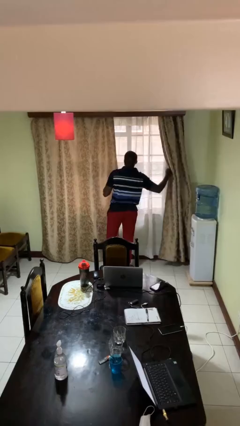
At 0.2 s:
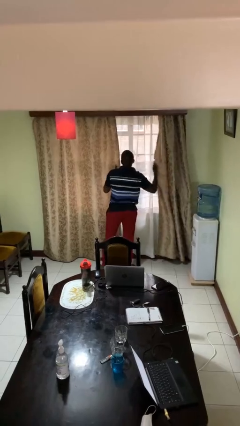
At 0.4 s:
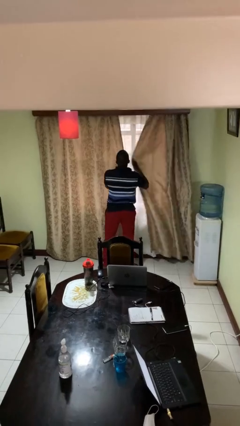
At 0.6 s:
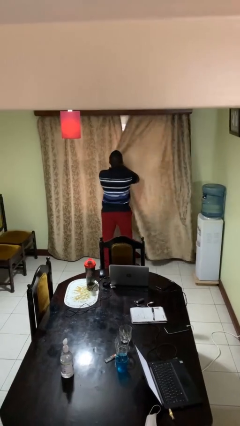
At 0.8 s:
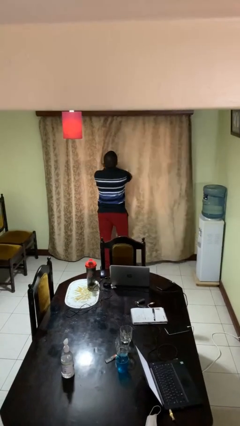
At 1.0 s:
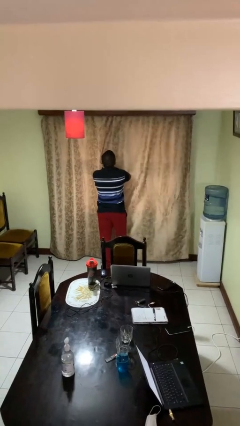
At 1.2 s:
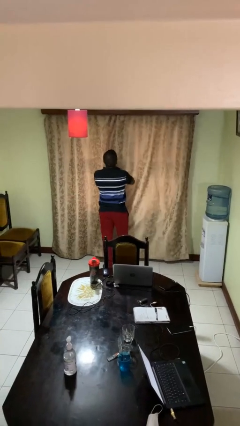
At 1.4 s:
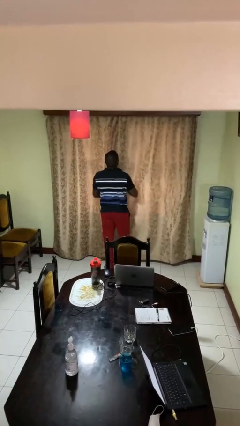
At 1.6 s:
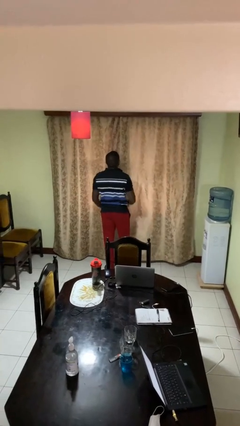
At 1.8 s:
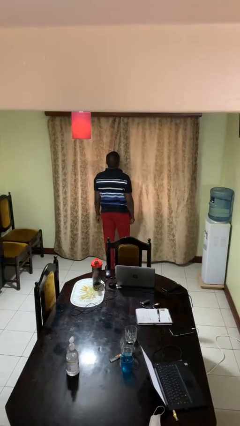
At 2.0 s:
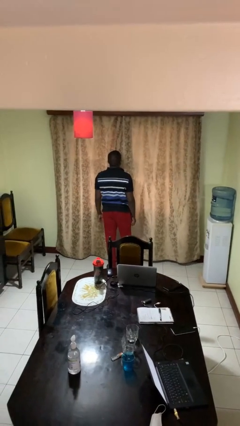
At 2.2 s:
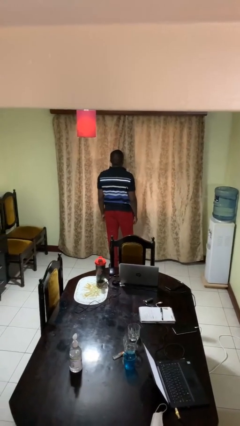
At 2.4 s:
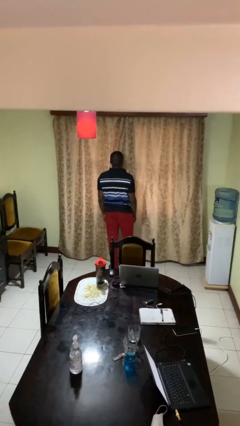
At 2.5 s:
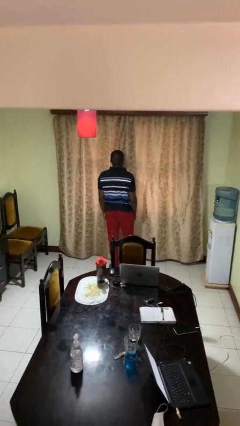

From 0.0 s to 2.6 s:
person closes curtains

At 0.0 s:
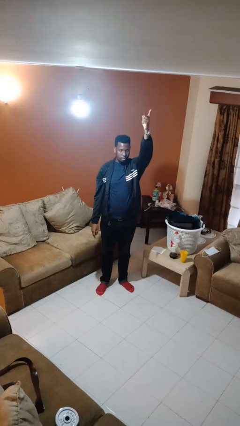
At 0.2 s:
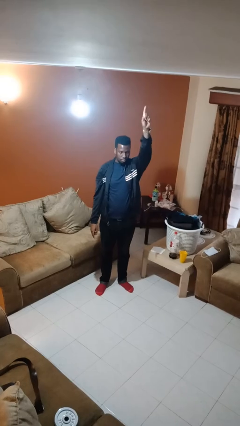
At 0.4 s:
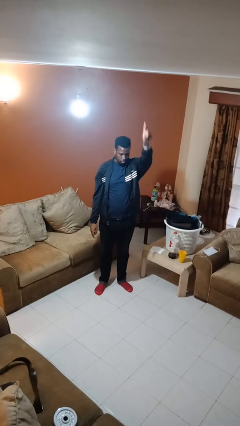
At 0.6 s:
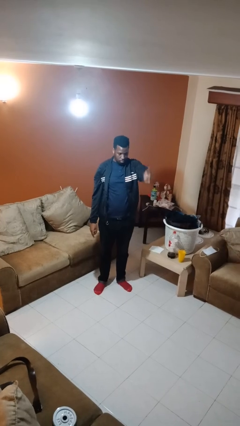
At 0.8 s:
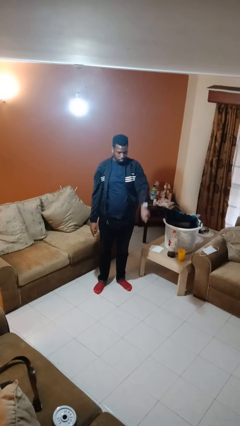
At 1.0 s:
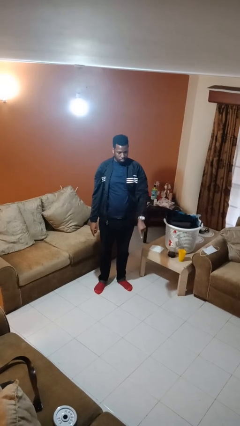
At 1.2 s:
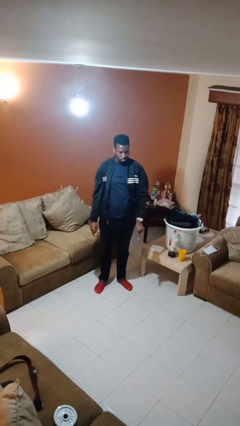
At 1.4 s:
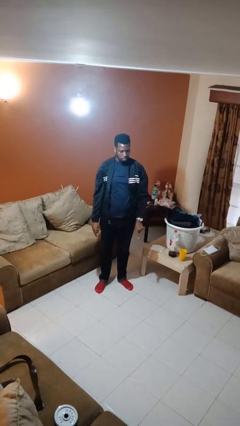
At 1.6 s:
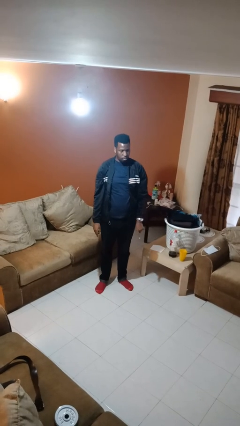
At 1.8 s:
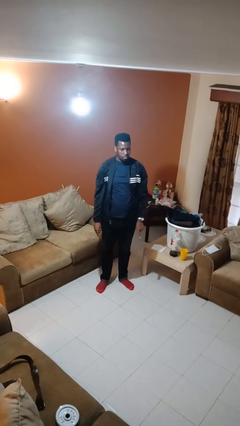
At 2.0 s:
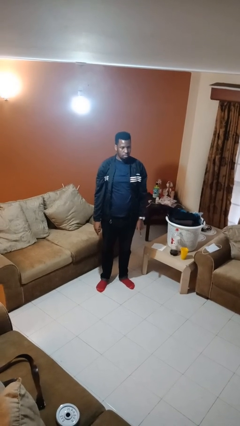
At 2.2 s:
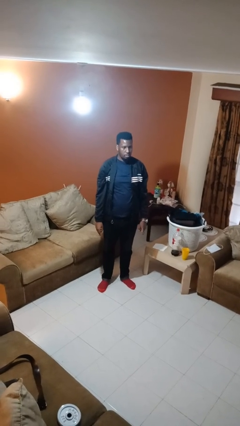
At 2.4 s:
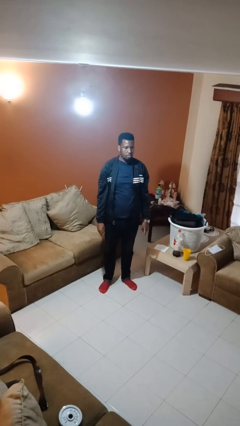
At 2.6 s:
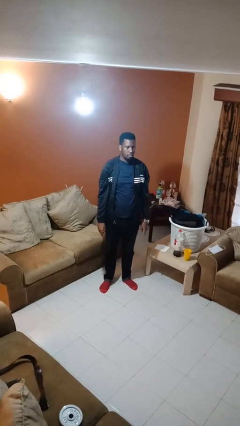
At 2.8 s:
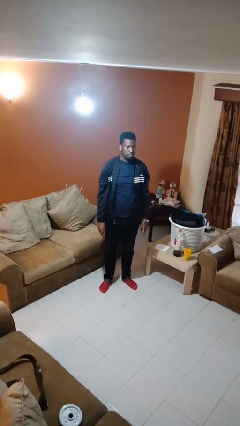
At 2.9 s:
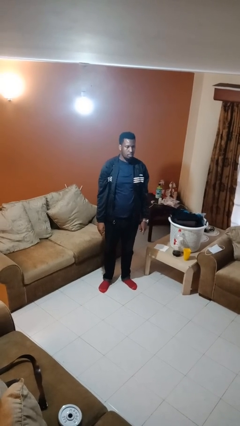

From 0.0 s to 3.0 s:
person gestures swipe down

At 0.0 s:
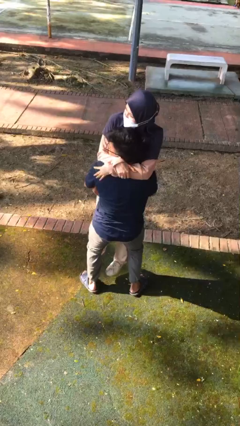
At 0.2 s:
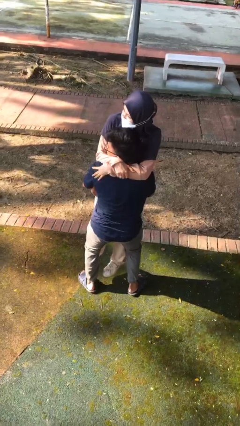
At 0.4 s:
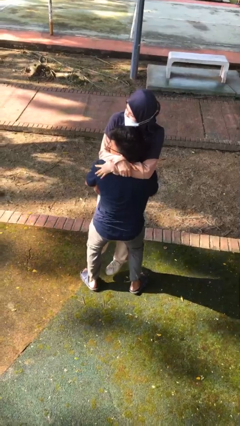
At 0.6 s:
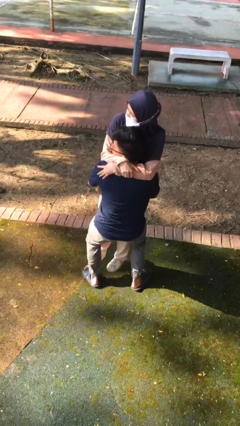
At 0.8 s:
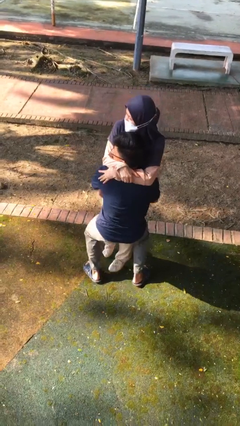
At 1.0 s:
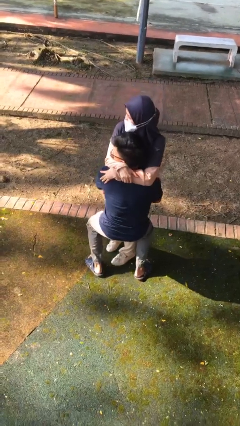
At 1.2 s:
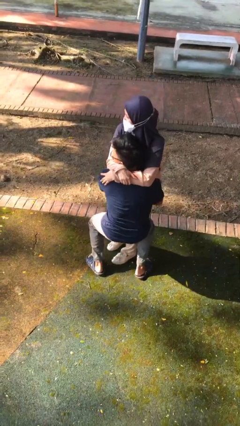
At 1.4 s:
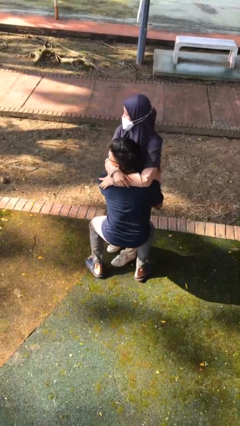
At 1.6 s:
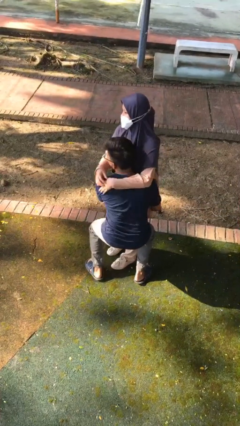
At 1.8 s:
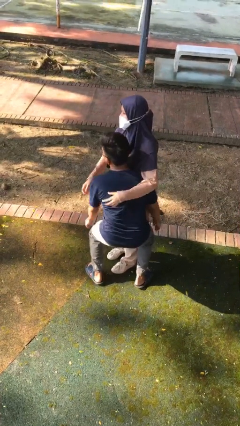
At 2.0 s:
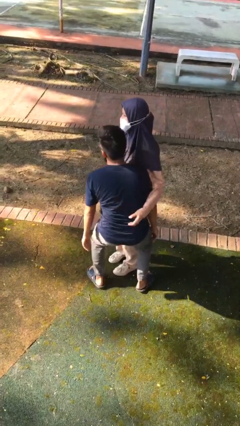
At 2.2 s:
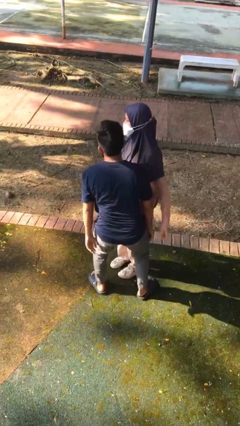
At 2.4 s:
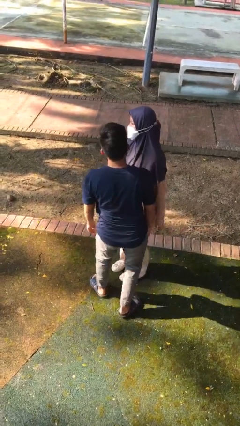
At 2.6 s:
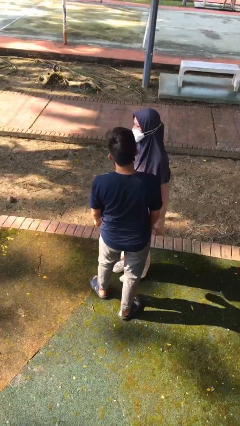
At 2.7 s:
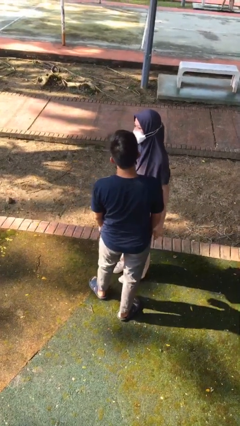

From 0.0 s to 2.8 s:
person puts down person

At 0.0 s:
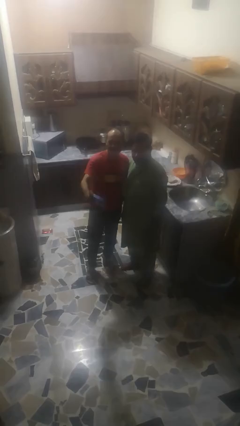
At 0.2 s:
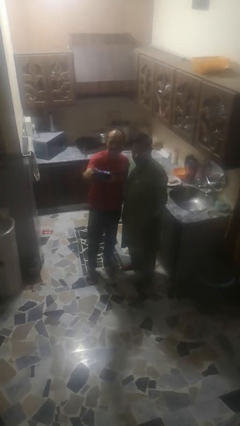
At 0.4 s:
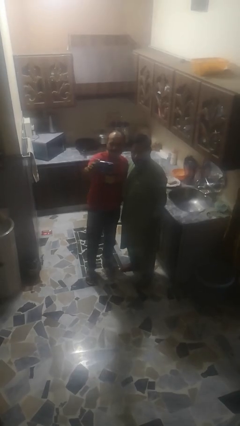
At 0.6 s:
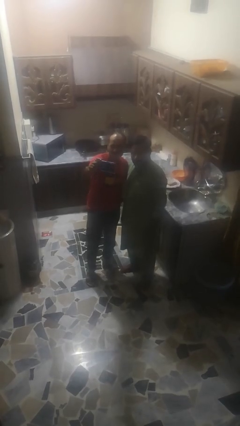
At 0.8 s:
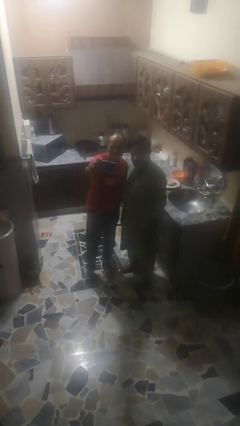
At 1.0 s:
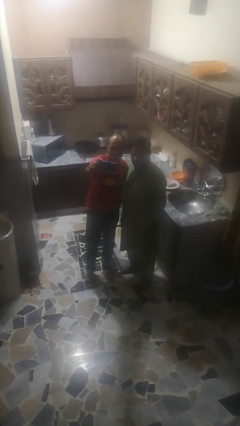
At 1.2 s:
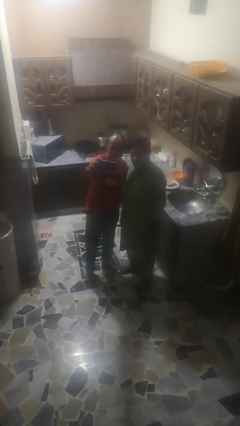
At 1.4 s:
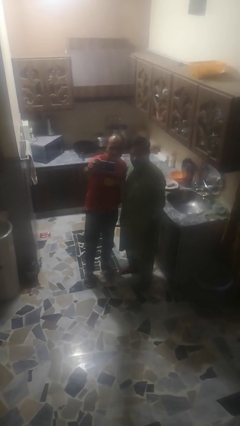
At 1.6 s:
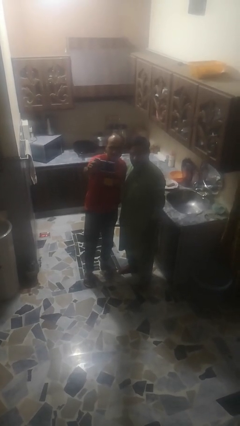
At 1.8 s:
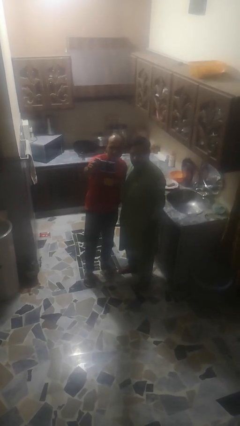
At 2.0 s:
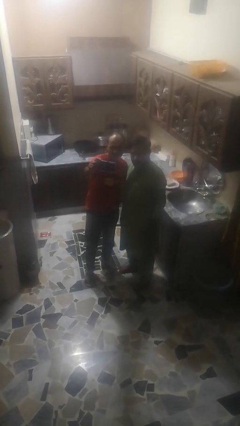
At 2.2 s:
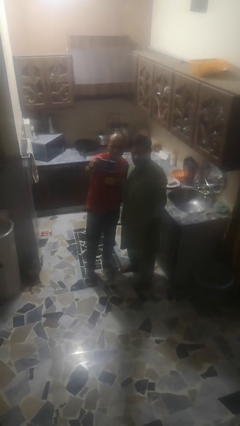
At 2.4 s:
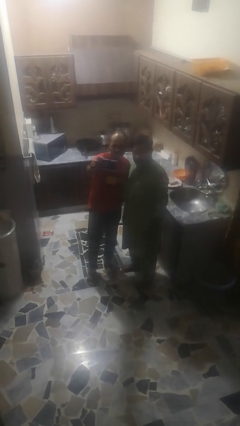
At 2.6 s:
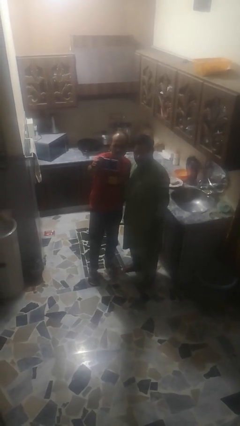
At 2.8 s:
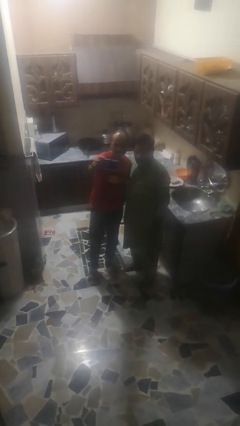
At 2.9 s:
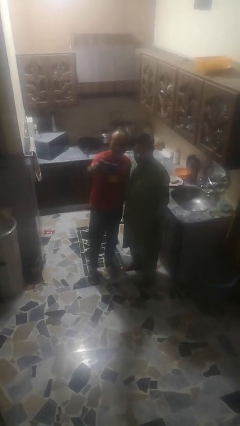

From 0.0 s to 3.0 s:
person takes selfie with person

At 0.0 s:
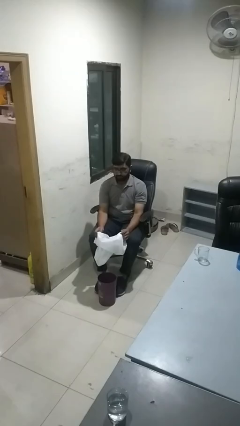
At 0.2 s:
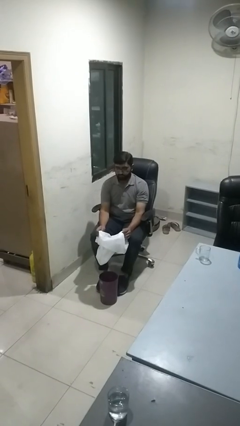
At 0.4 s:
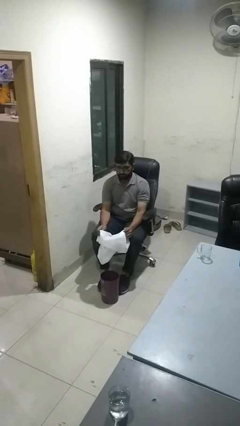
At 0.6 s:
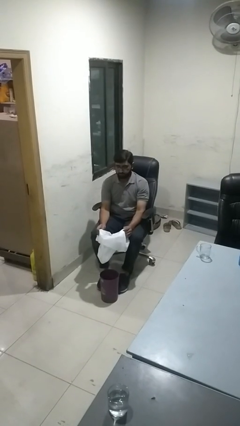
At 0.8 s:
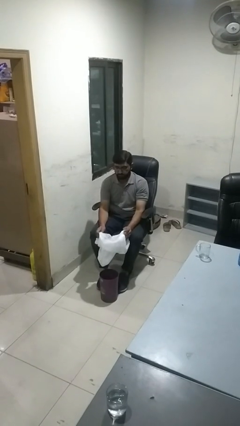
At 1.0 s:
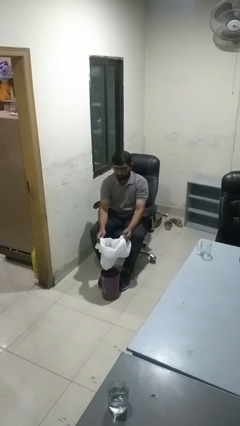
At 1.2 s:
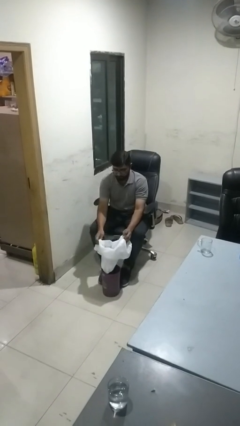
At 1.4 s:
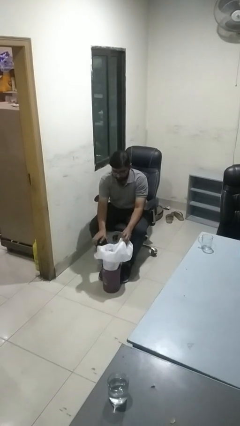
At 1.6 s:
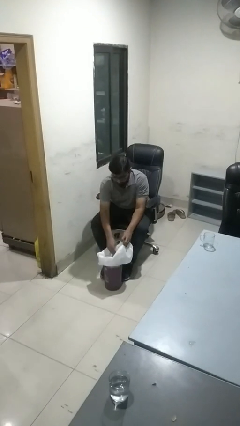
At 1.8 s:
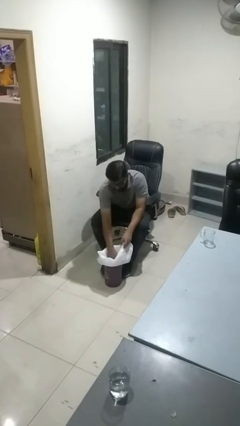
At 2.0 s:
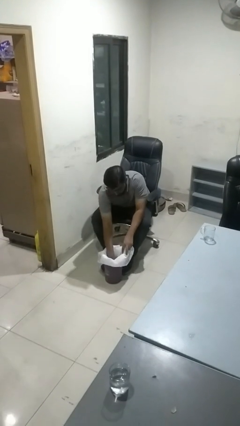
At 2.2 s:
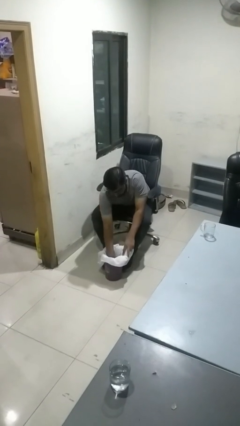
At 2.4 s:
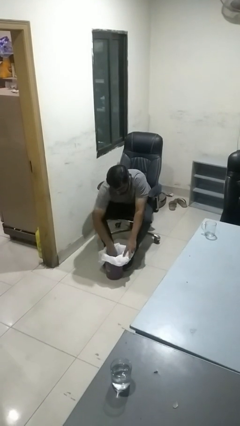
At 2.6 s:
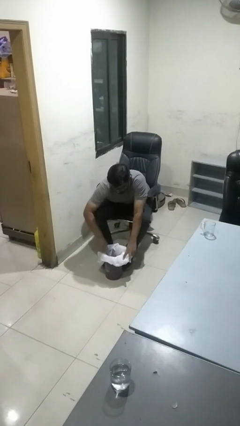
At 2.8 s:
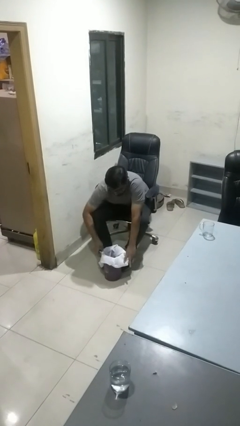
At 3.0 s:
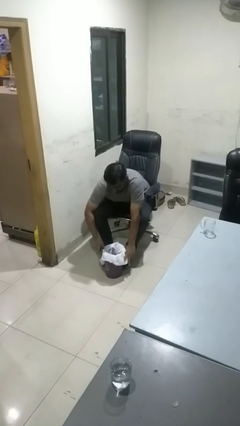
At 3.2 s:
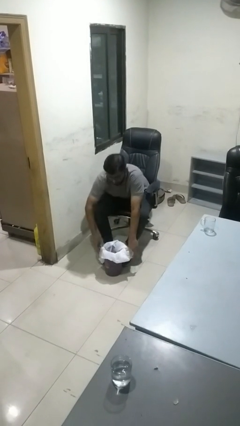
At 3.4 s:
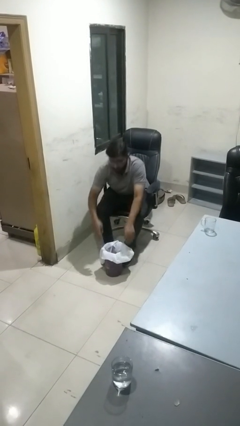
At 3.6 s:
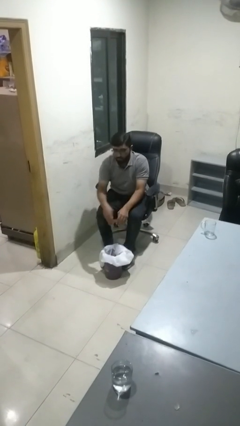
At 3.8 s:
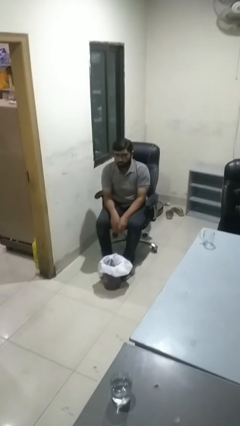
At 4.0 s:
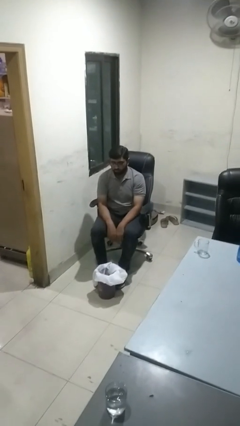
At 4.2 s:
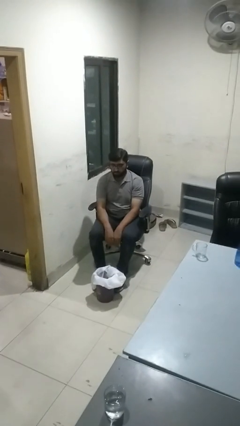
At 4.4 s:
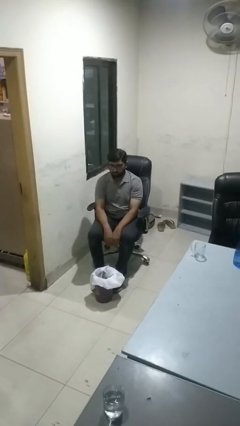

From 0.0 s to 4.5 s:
person inserts trashbag into trashcan

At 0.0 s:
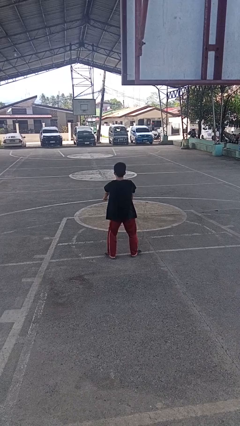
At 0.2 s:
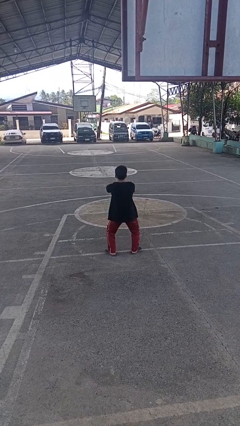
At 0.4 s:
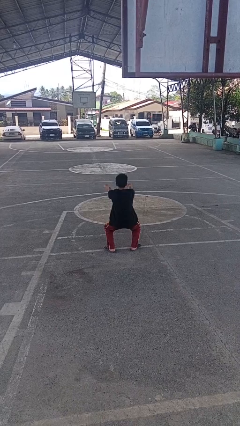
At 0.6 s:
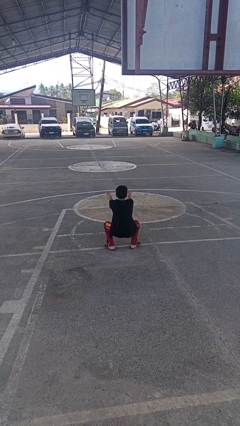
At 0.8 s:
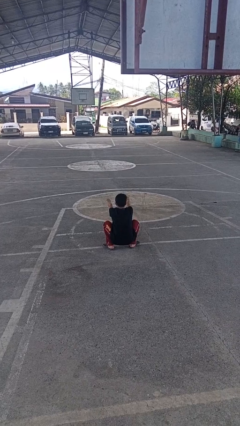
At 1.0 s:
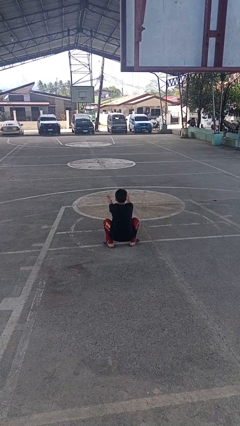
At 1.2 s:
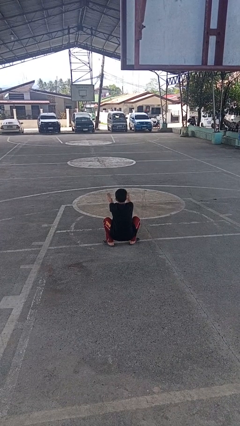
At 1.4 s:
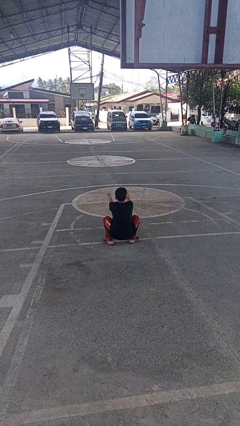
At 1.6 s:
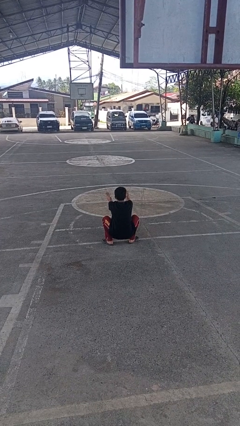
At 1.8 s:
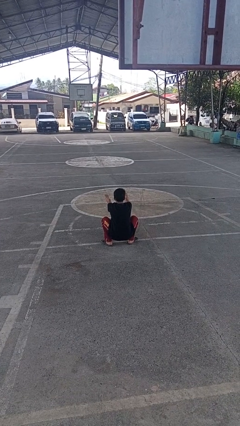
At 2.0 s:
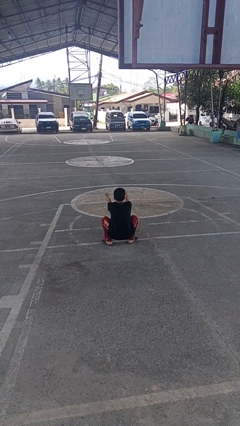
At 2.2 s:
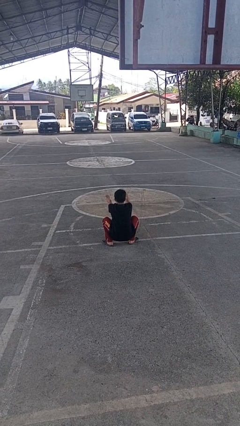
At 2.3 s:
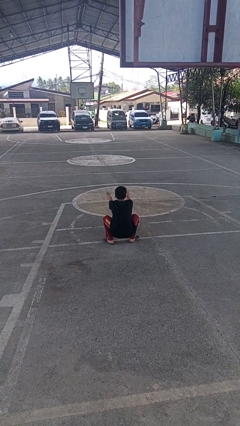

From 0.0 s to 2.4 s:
person squats
